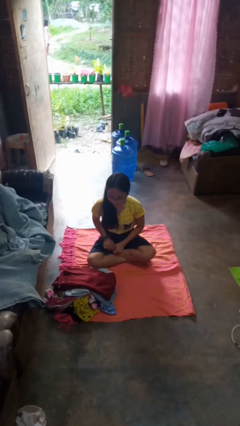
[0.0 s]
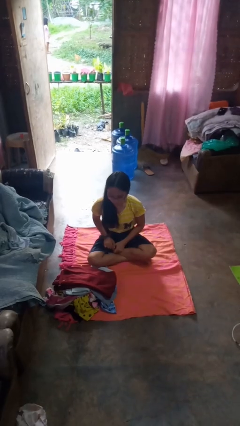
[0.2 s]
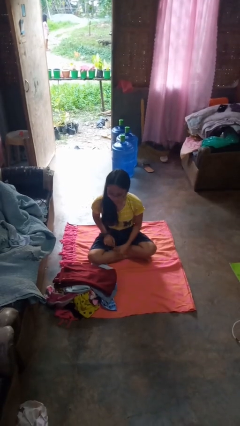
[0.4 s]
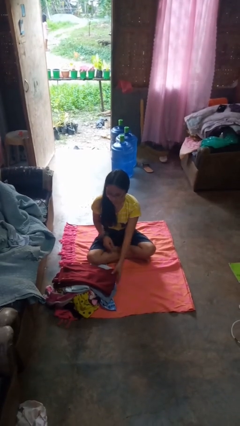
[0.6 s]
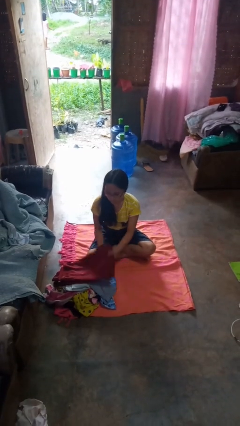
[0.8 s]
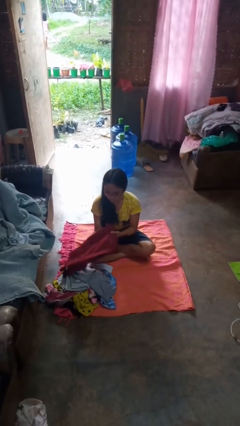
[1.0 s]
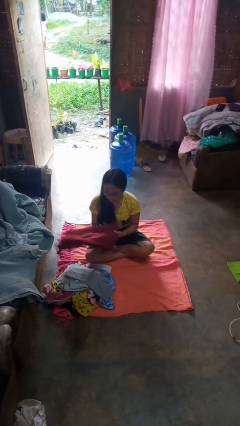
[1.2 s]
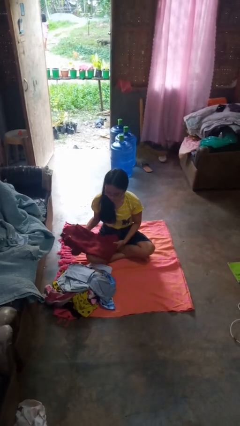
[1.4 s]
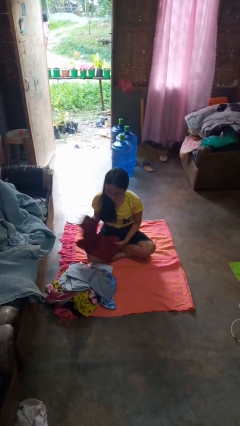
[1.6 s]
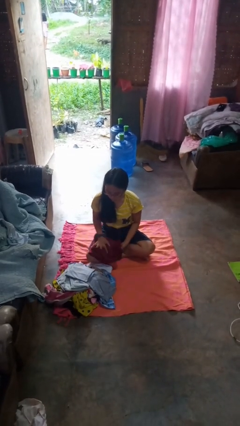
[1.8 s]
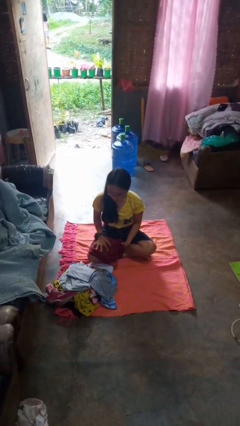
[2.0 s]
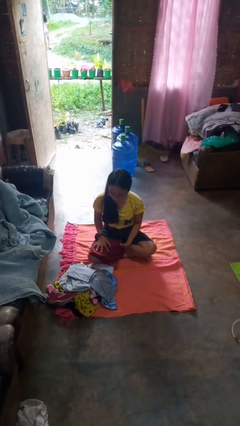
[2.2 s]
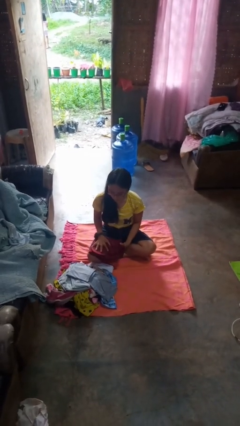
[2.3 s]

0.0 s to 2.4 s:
person folds pants

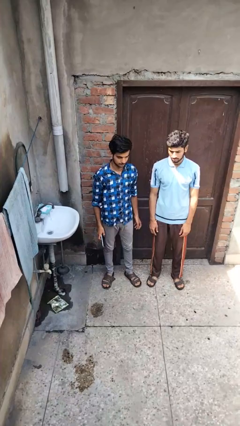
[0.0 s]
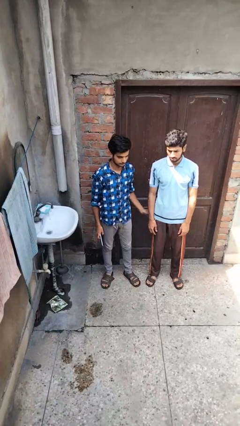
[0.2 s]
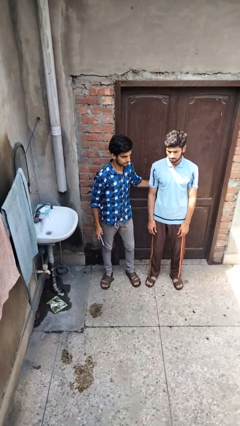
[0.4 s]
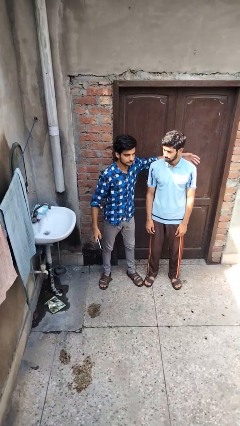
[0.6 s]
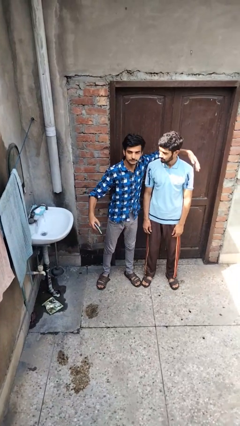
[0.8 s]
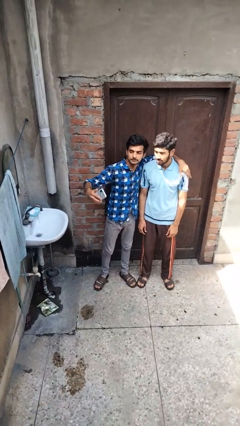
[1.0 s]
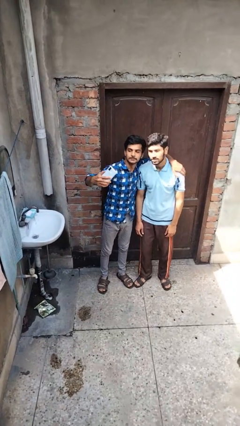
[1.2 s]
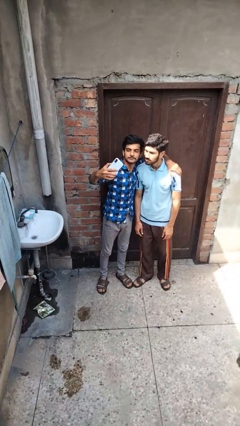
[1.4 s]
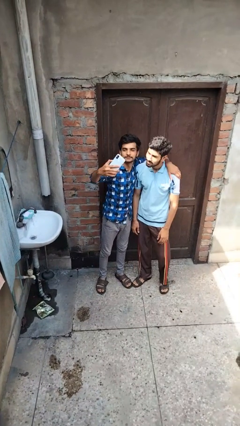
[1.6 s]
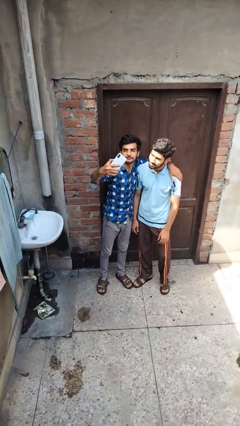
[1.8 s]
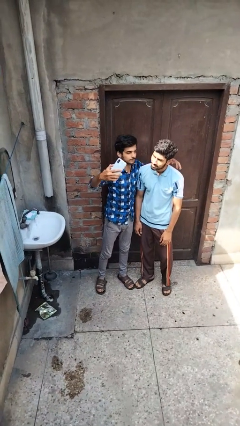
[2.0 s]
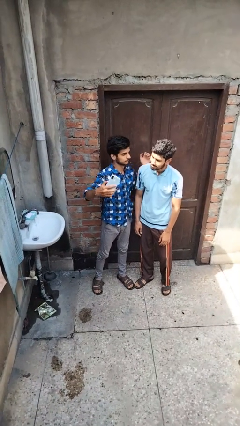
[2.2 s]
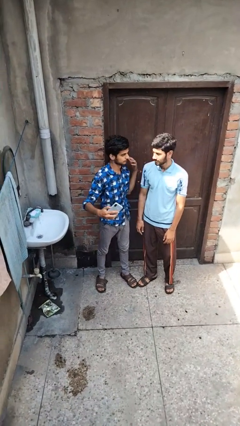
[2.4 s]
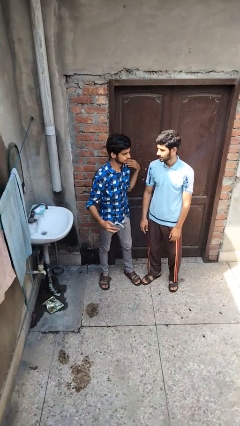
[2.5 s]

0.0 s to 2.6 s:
person takes selfie with person

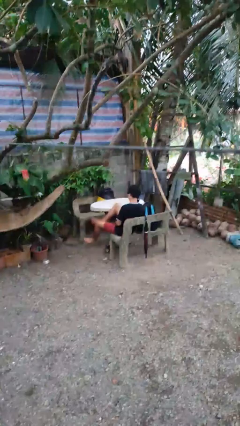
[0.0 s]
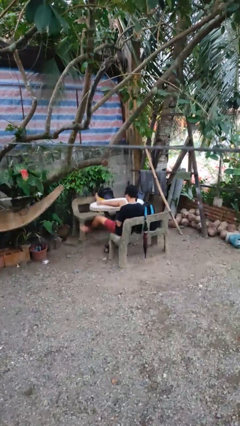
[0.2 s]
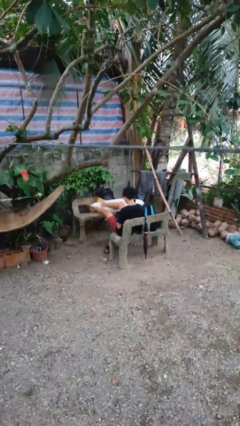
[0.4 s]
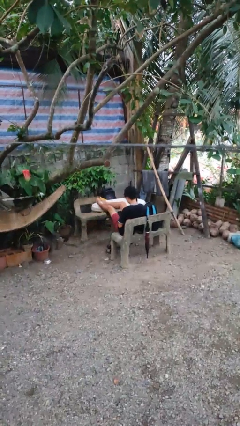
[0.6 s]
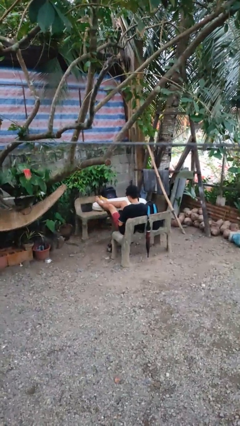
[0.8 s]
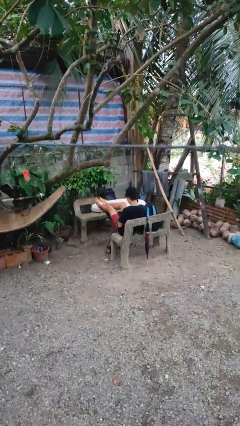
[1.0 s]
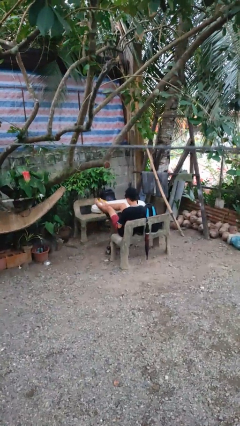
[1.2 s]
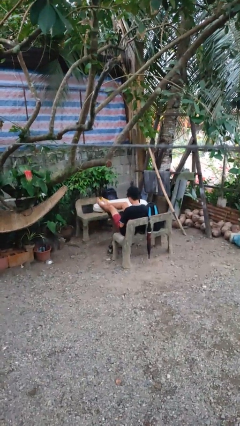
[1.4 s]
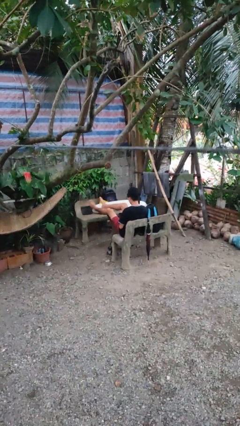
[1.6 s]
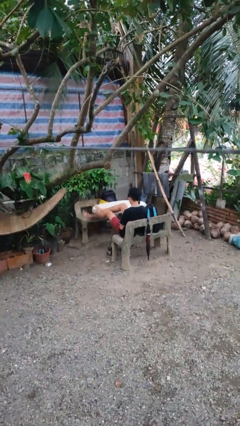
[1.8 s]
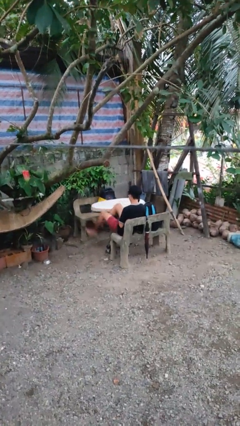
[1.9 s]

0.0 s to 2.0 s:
person puts feet up

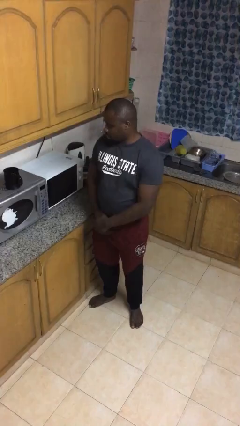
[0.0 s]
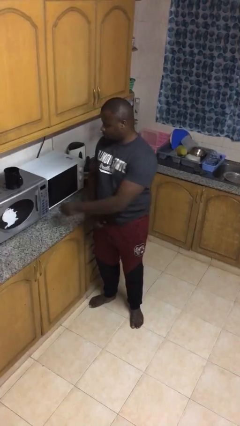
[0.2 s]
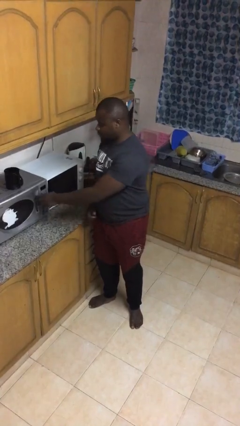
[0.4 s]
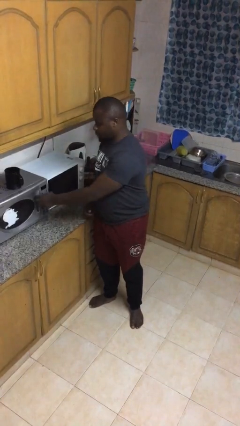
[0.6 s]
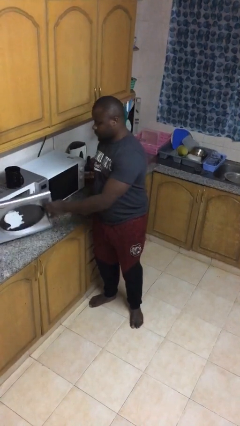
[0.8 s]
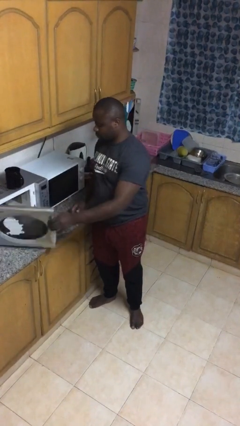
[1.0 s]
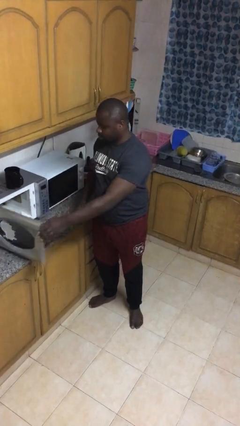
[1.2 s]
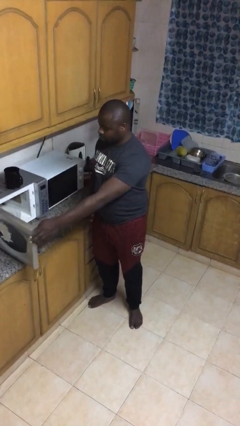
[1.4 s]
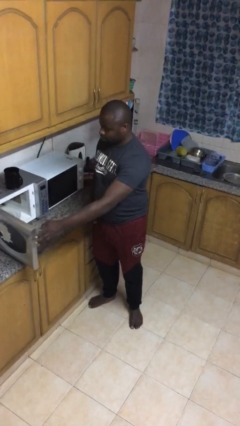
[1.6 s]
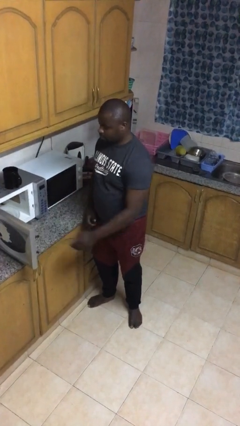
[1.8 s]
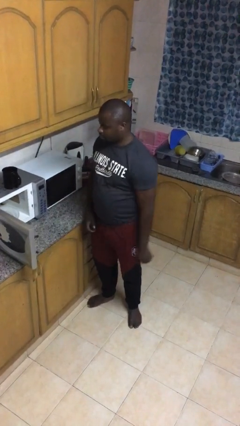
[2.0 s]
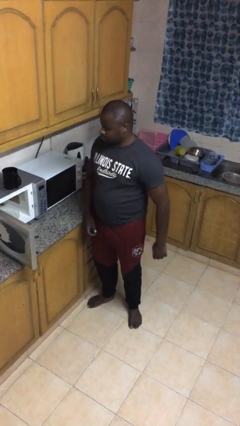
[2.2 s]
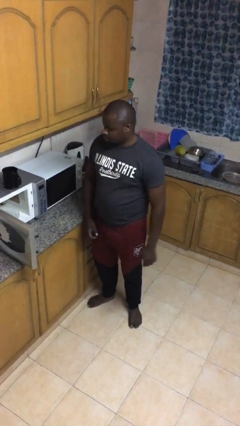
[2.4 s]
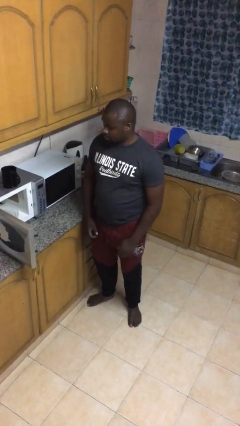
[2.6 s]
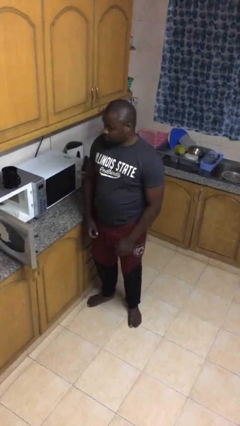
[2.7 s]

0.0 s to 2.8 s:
person opens microwave

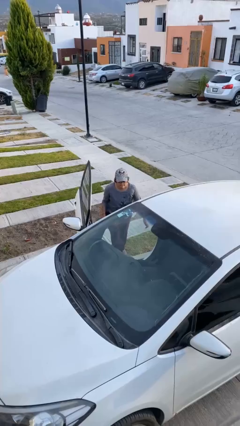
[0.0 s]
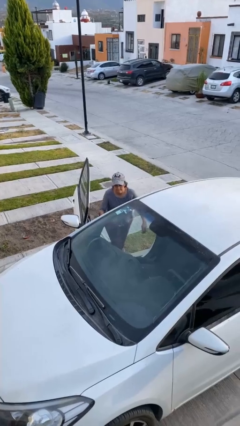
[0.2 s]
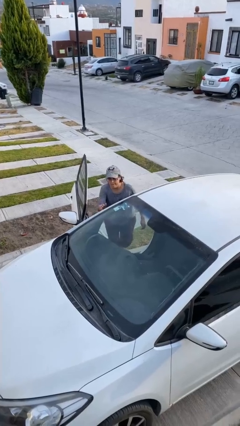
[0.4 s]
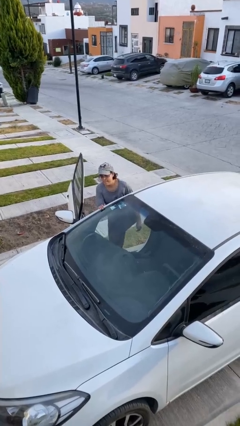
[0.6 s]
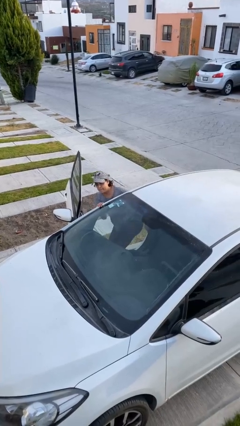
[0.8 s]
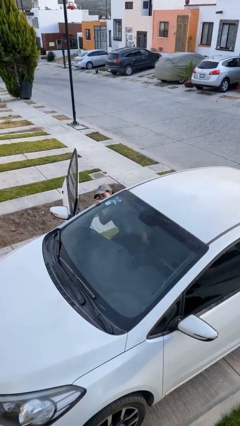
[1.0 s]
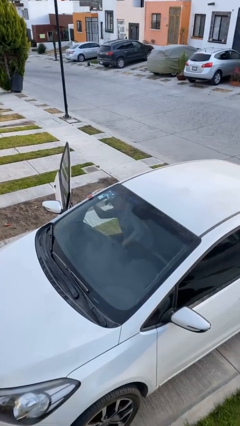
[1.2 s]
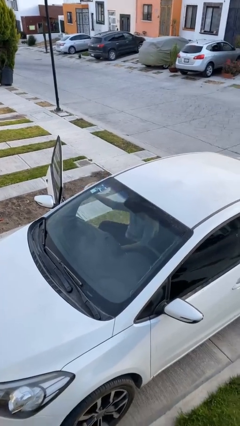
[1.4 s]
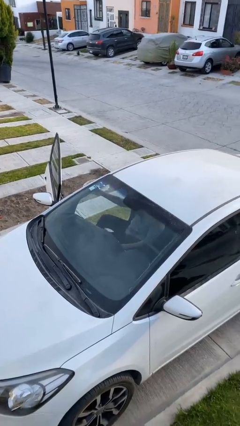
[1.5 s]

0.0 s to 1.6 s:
person enters car

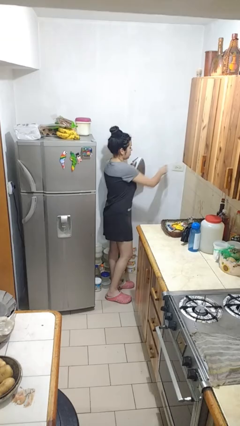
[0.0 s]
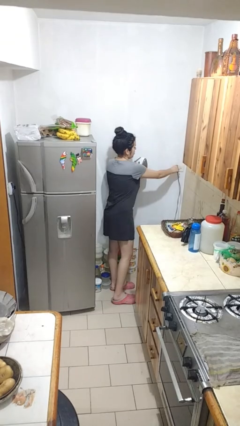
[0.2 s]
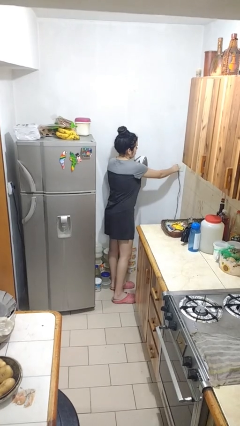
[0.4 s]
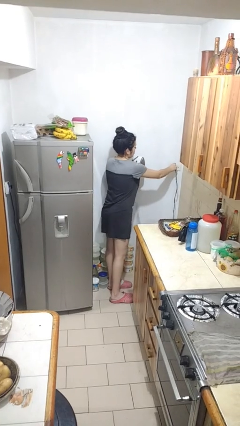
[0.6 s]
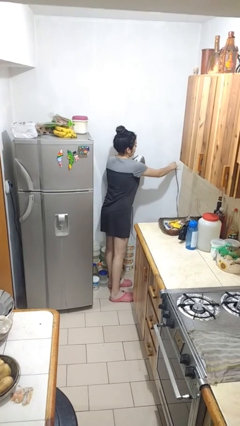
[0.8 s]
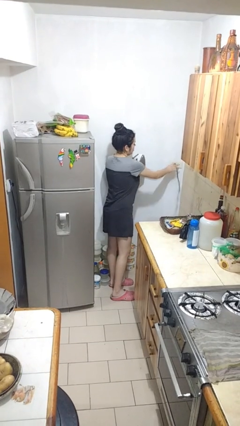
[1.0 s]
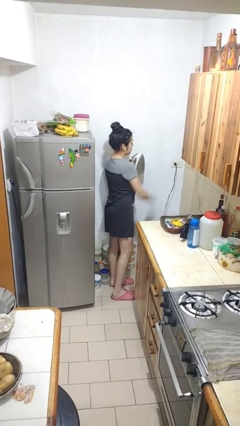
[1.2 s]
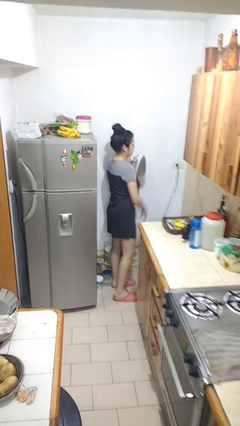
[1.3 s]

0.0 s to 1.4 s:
person plugs into electrical socket

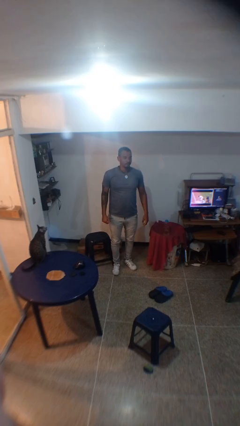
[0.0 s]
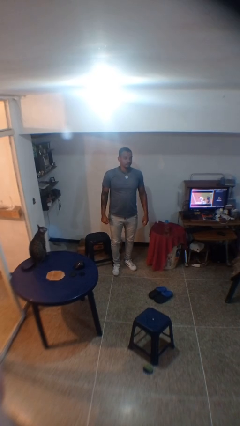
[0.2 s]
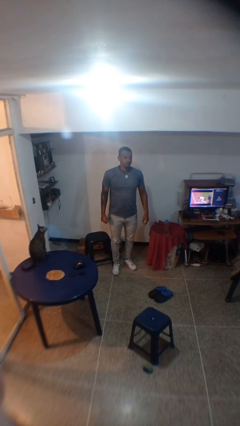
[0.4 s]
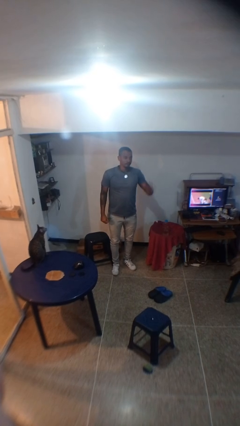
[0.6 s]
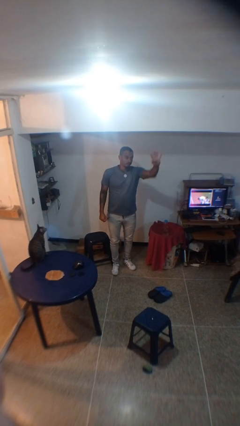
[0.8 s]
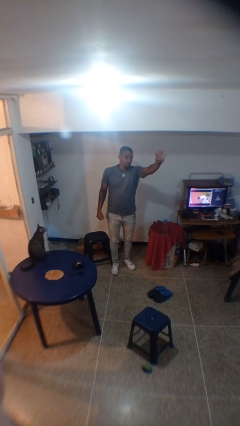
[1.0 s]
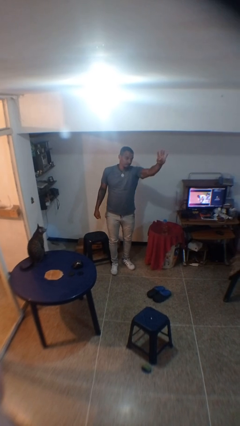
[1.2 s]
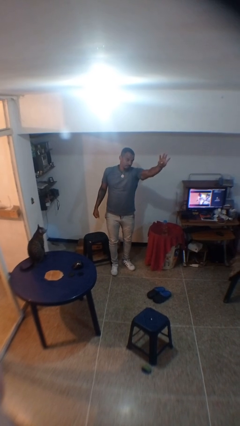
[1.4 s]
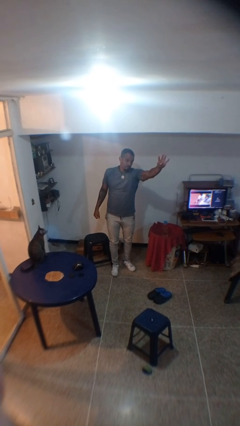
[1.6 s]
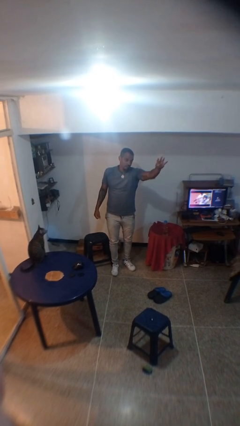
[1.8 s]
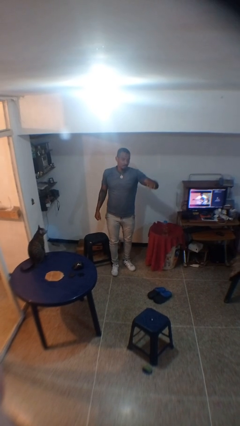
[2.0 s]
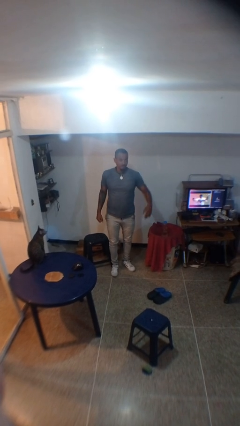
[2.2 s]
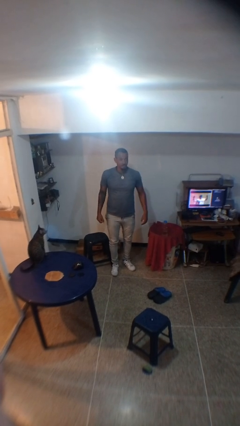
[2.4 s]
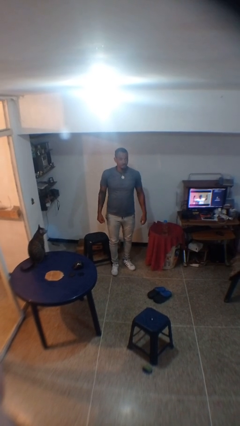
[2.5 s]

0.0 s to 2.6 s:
person gestures number four

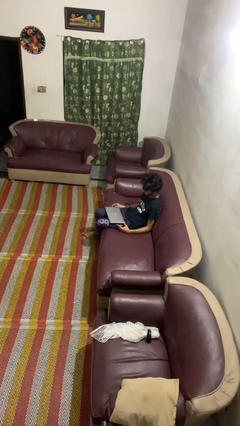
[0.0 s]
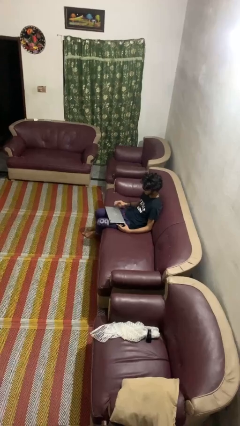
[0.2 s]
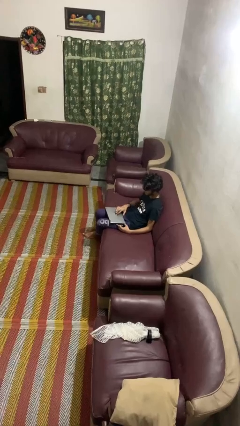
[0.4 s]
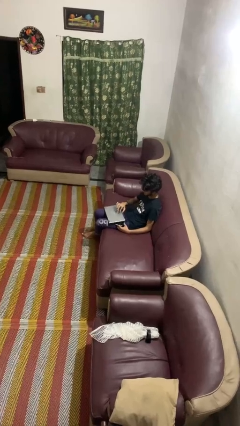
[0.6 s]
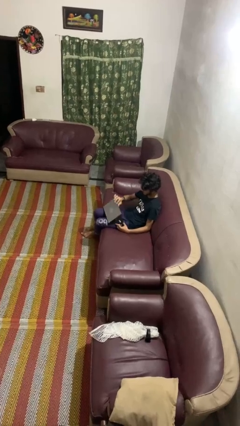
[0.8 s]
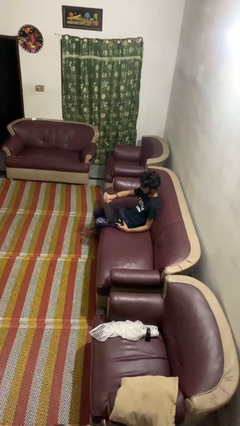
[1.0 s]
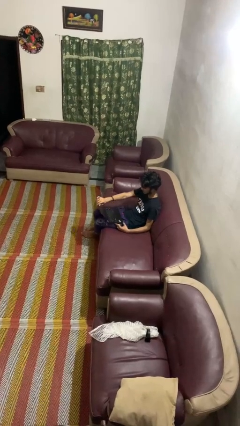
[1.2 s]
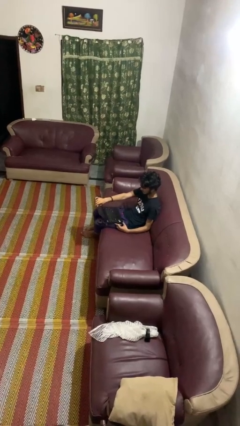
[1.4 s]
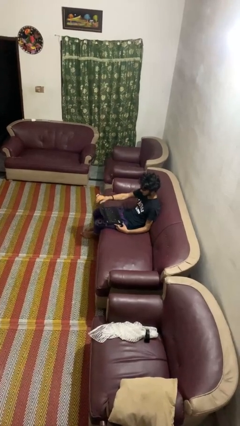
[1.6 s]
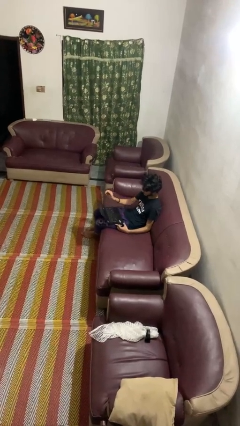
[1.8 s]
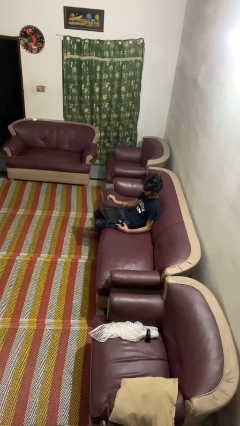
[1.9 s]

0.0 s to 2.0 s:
person opens laptop
